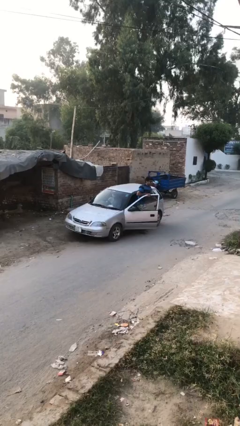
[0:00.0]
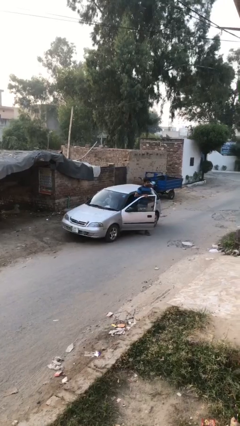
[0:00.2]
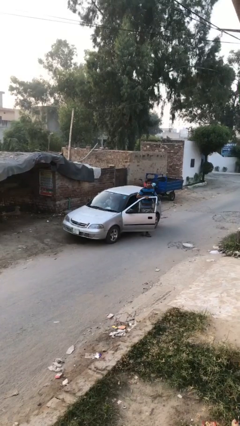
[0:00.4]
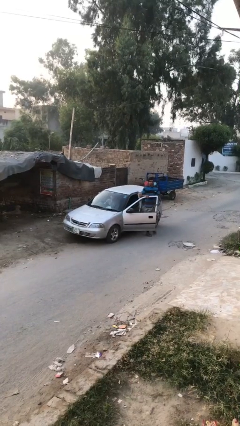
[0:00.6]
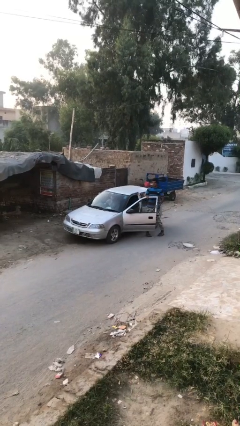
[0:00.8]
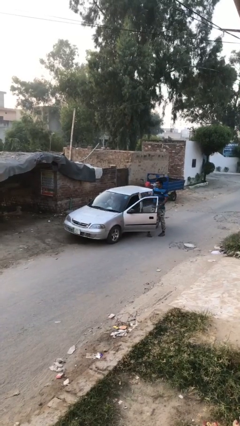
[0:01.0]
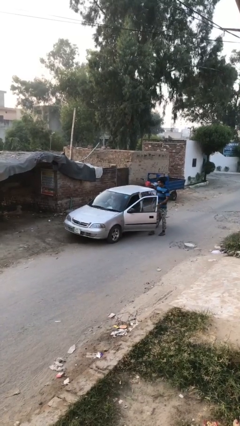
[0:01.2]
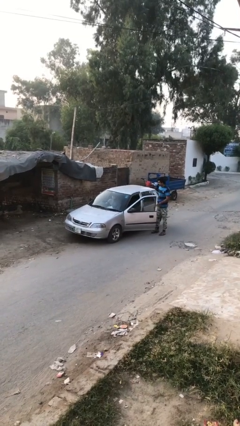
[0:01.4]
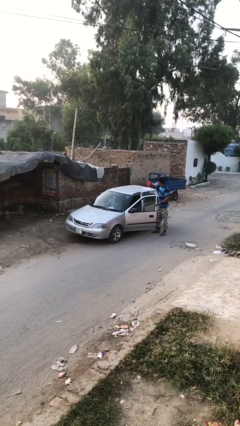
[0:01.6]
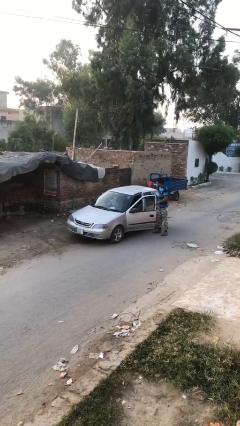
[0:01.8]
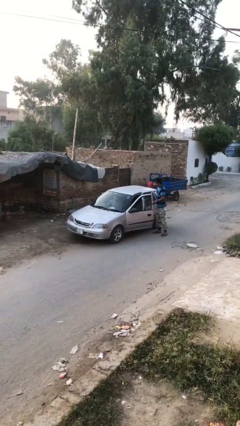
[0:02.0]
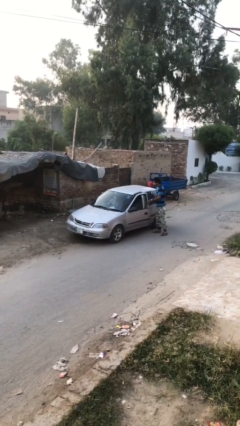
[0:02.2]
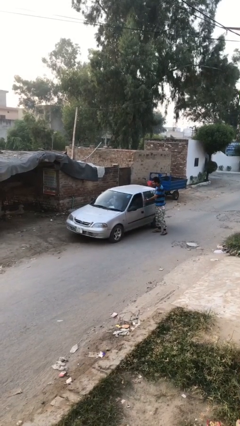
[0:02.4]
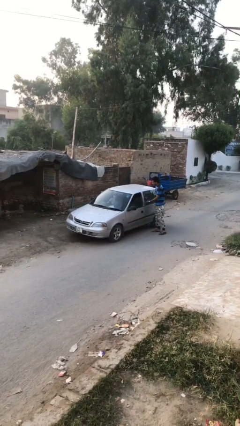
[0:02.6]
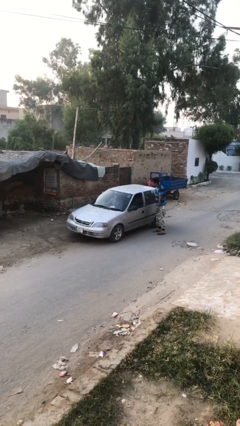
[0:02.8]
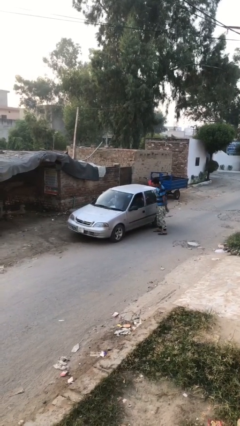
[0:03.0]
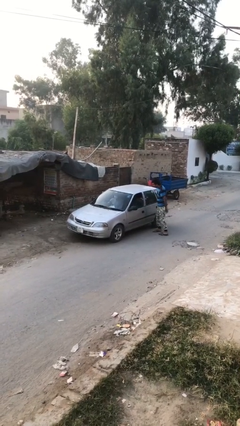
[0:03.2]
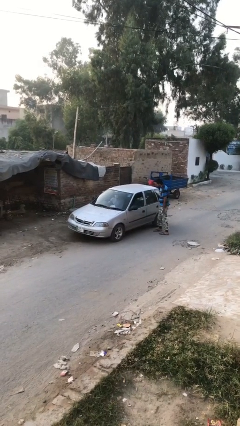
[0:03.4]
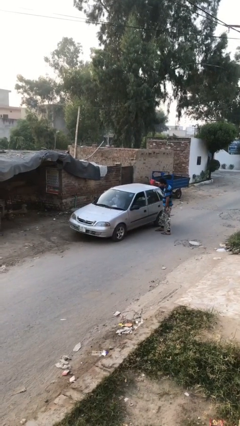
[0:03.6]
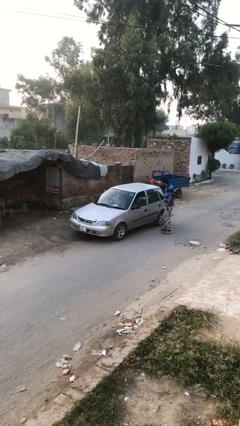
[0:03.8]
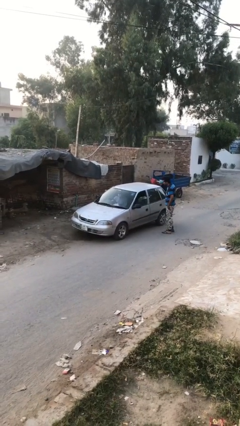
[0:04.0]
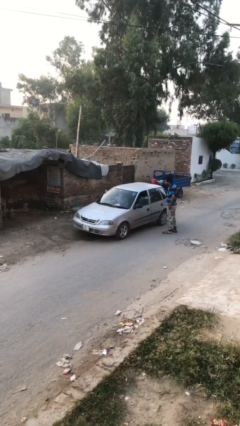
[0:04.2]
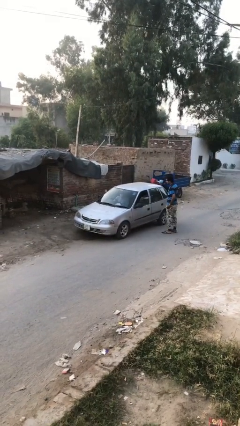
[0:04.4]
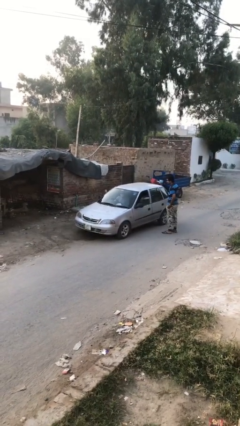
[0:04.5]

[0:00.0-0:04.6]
car drops off person

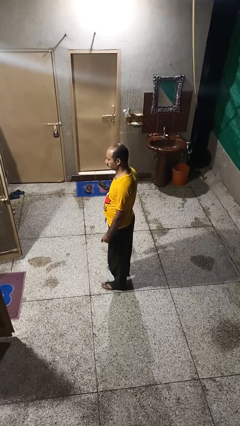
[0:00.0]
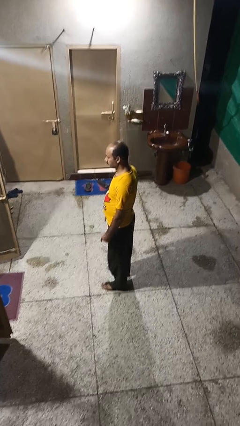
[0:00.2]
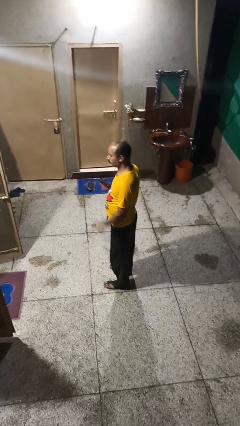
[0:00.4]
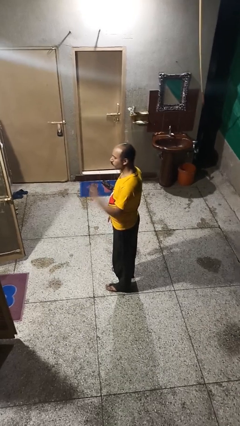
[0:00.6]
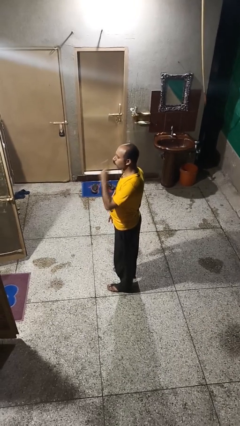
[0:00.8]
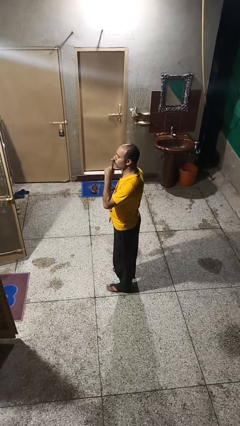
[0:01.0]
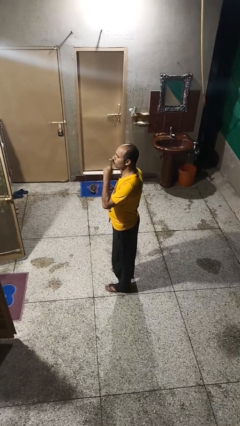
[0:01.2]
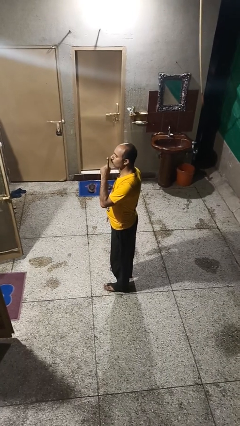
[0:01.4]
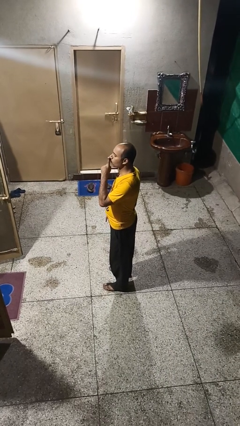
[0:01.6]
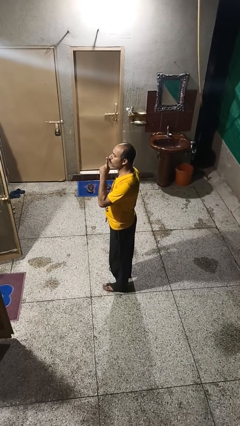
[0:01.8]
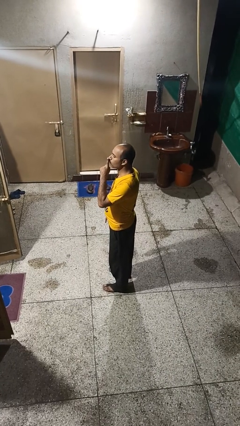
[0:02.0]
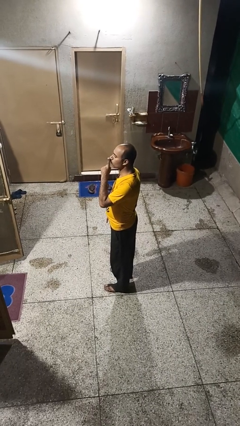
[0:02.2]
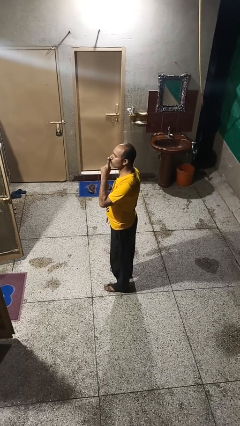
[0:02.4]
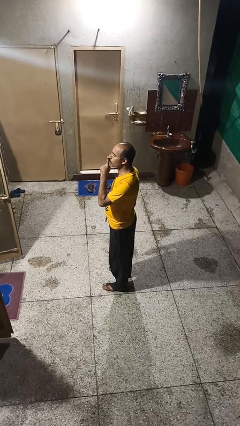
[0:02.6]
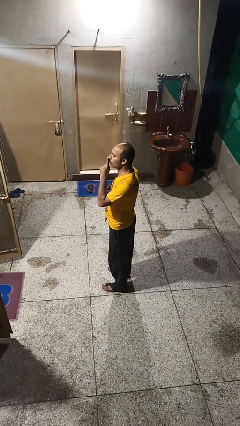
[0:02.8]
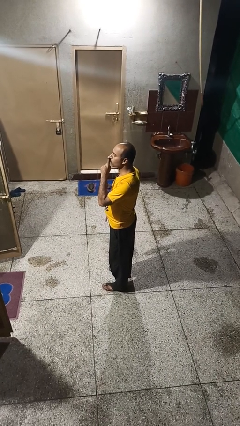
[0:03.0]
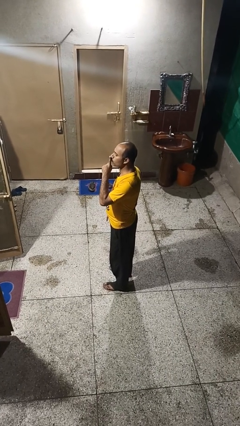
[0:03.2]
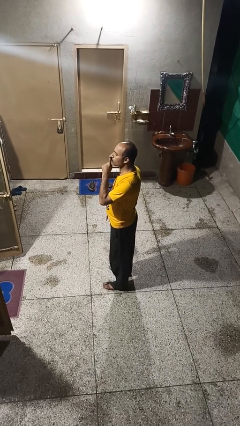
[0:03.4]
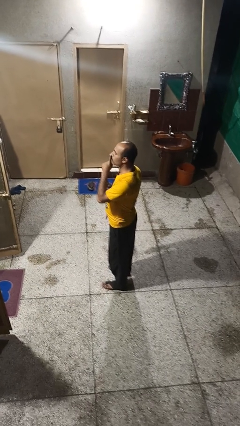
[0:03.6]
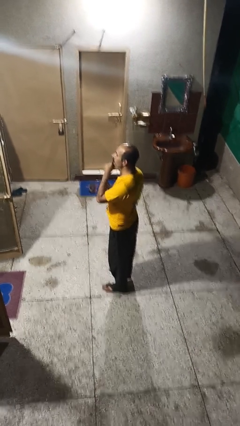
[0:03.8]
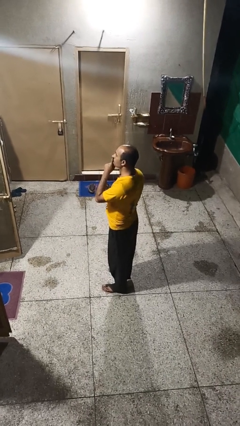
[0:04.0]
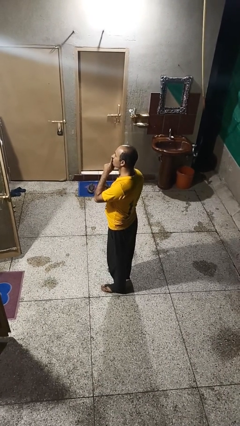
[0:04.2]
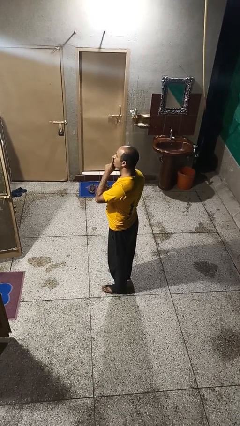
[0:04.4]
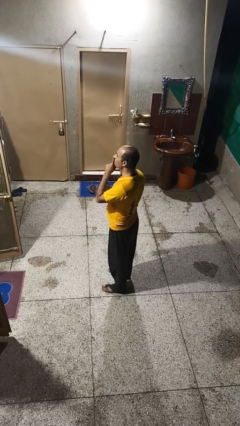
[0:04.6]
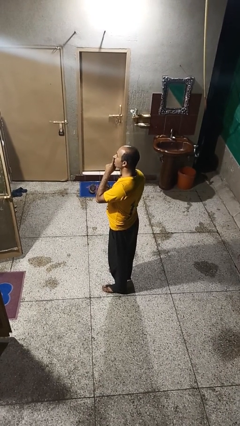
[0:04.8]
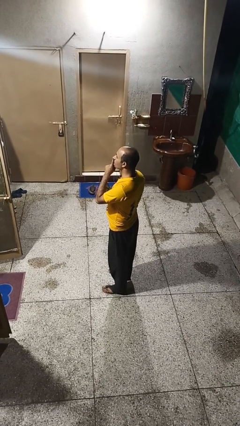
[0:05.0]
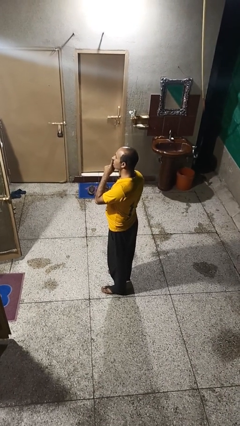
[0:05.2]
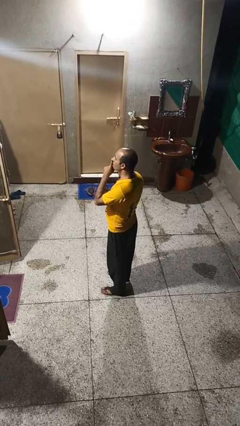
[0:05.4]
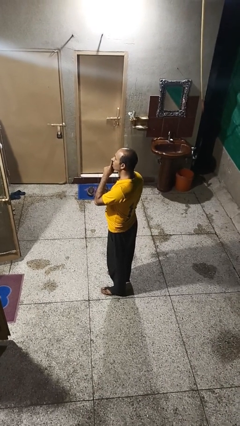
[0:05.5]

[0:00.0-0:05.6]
person gestures be quiet

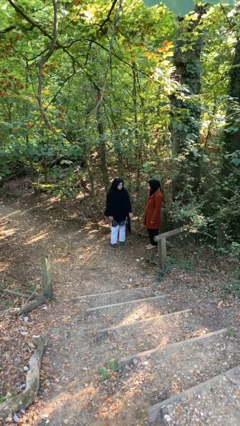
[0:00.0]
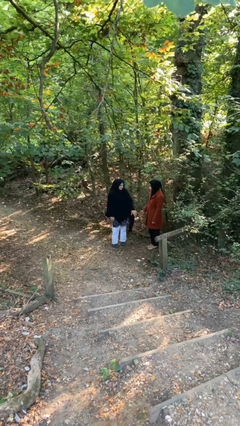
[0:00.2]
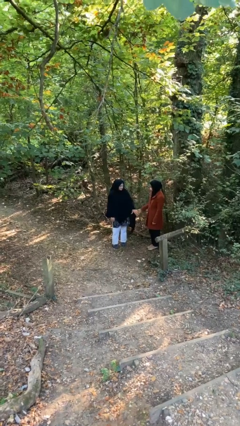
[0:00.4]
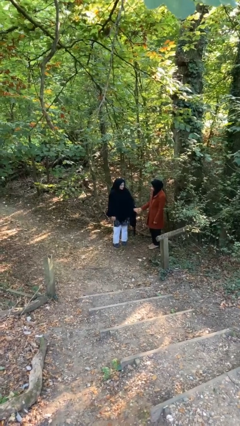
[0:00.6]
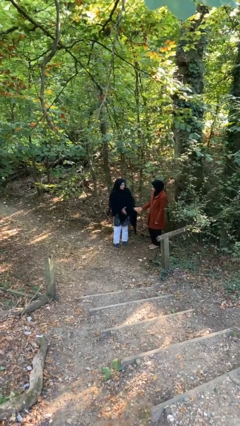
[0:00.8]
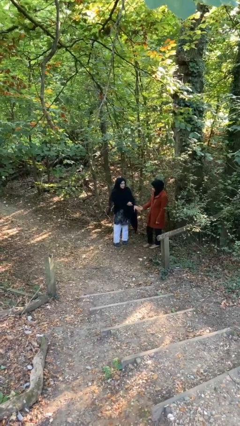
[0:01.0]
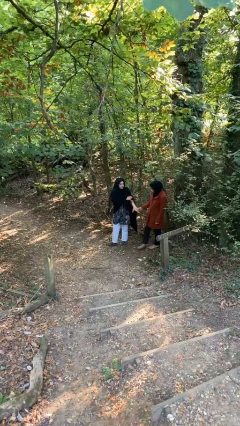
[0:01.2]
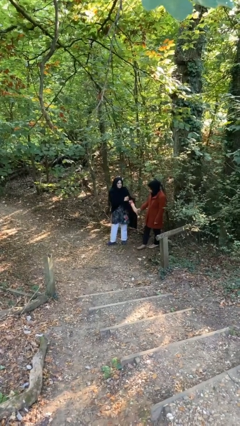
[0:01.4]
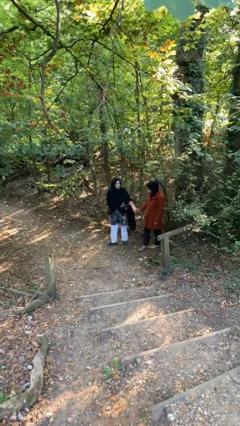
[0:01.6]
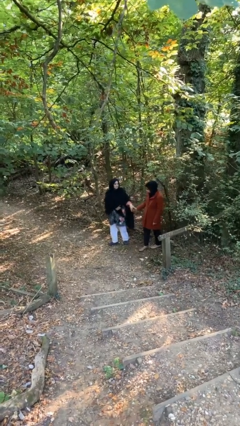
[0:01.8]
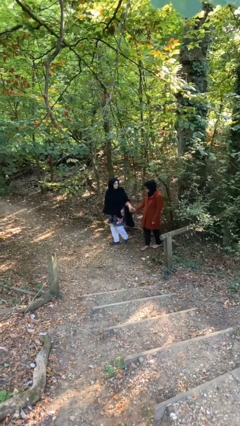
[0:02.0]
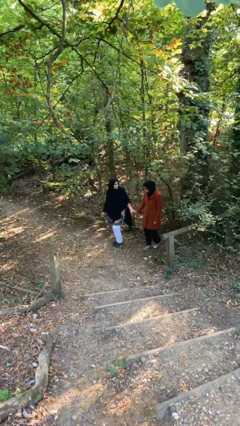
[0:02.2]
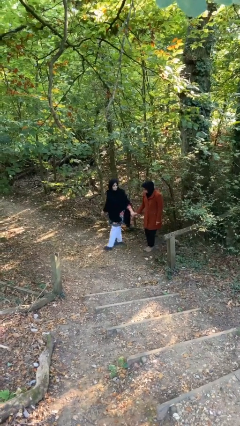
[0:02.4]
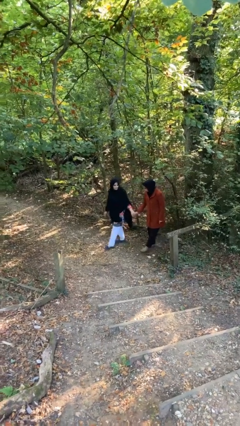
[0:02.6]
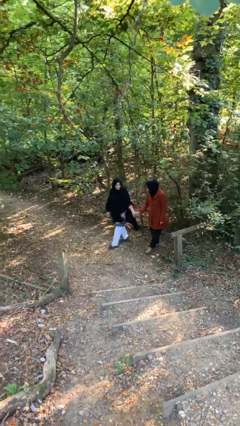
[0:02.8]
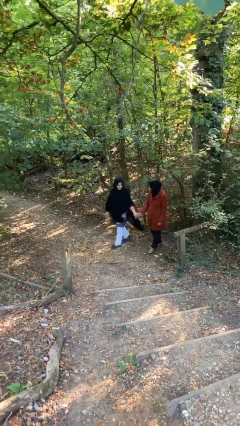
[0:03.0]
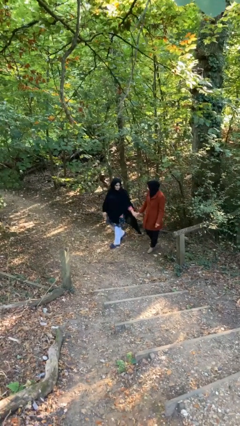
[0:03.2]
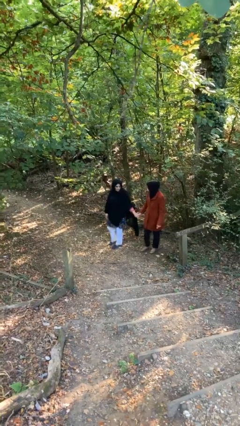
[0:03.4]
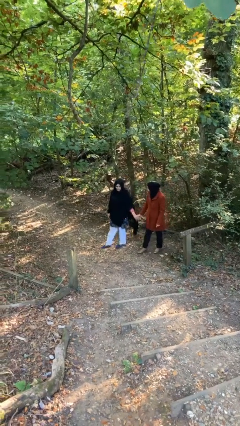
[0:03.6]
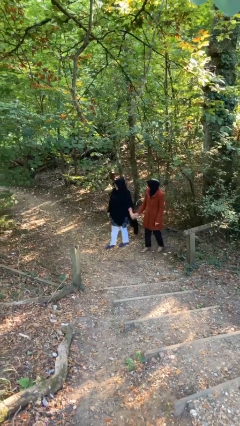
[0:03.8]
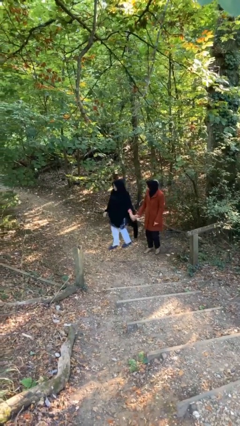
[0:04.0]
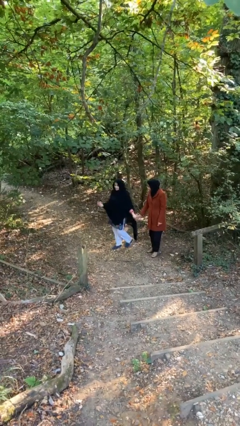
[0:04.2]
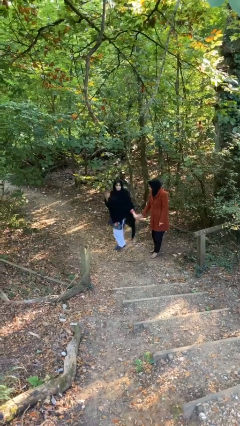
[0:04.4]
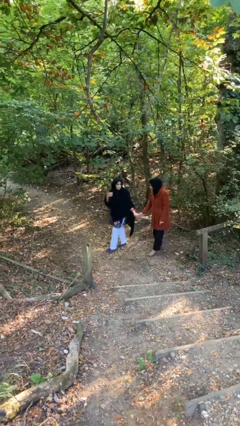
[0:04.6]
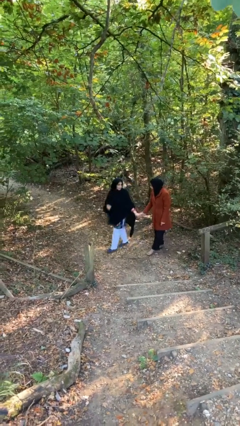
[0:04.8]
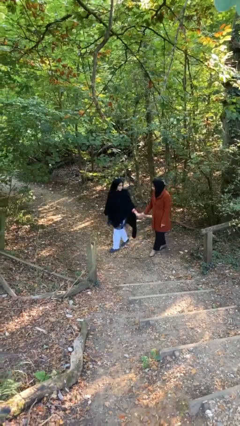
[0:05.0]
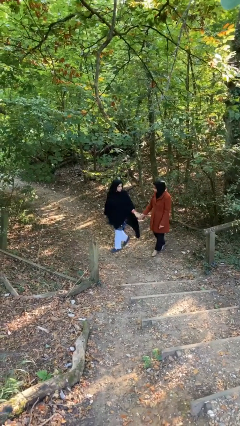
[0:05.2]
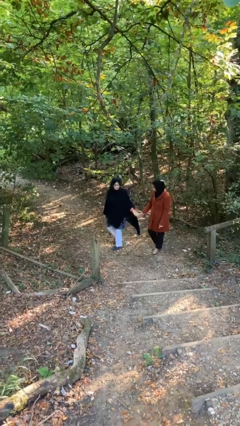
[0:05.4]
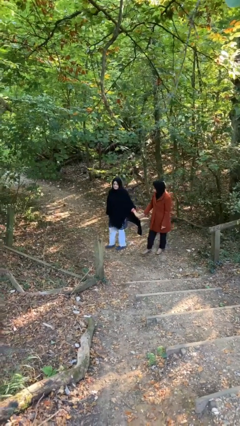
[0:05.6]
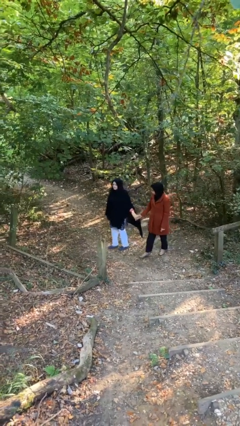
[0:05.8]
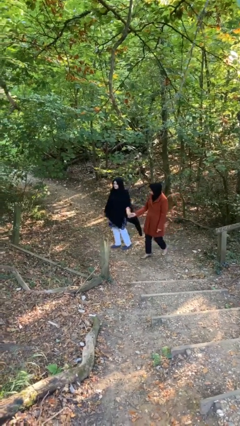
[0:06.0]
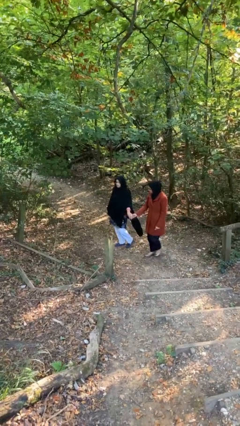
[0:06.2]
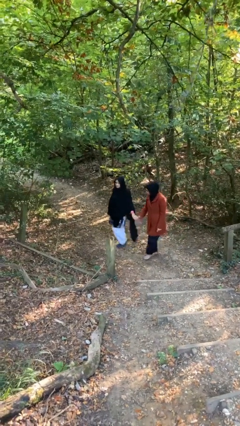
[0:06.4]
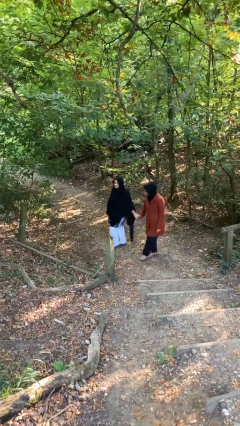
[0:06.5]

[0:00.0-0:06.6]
person holds hand

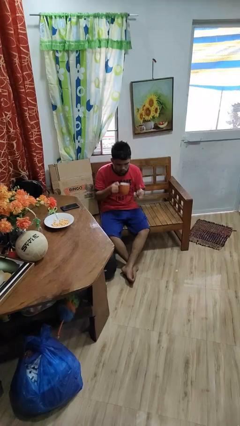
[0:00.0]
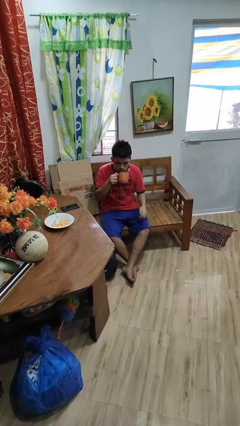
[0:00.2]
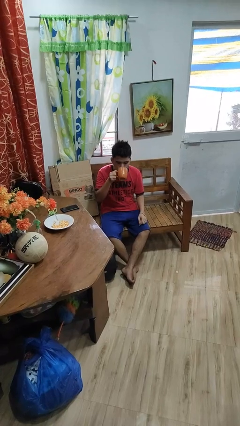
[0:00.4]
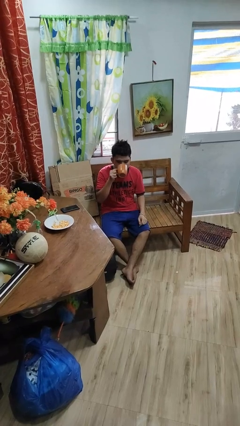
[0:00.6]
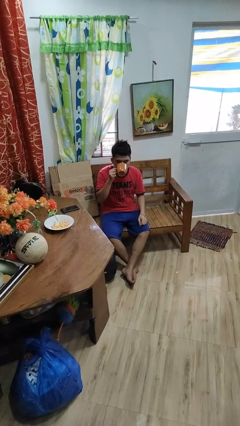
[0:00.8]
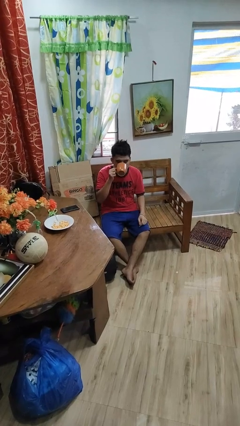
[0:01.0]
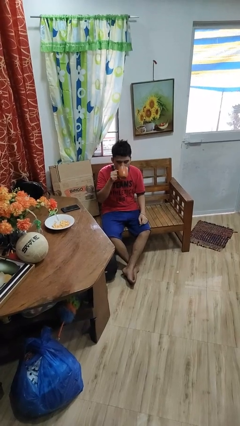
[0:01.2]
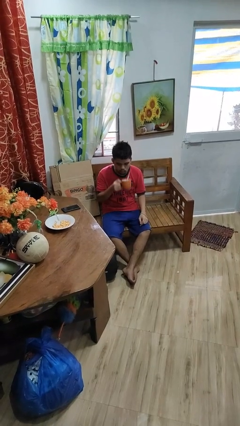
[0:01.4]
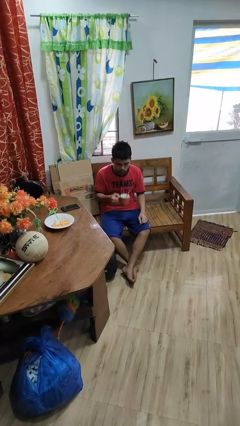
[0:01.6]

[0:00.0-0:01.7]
person drinks from mug
